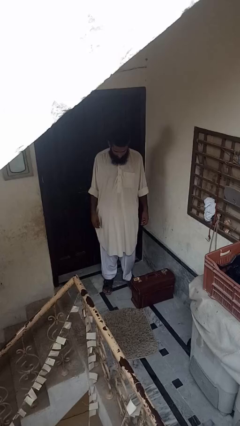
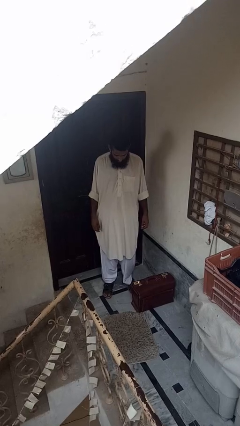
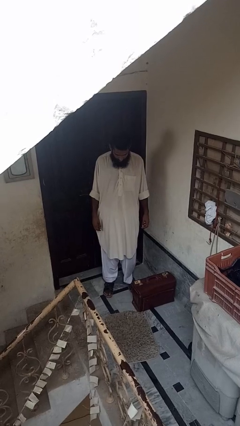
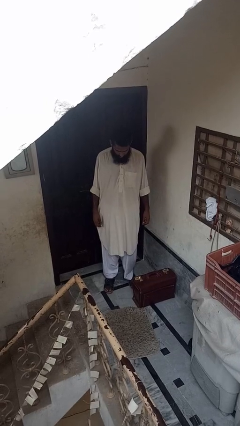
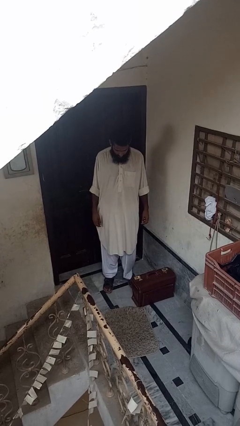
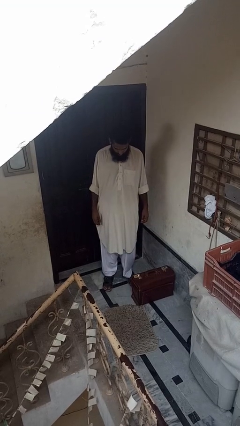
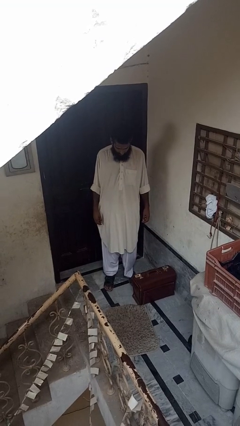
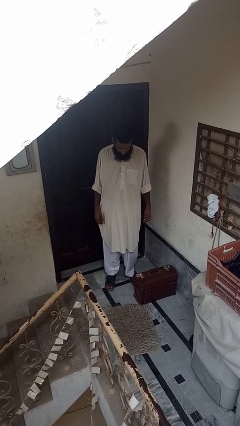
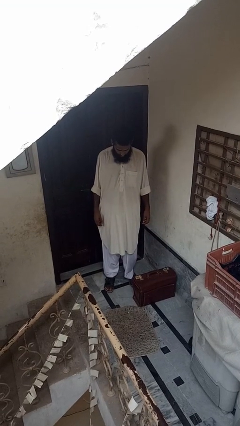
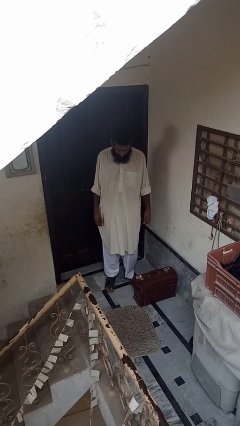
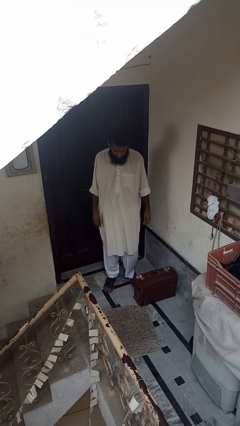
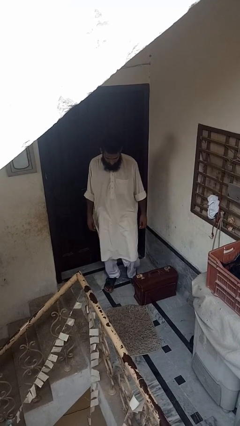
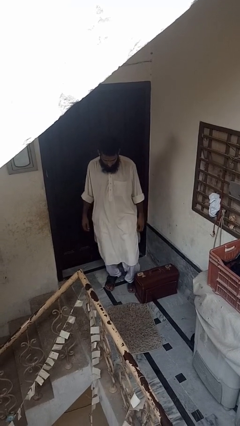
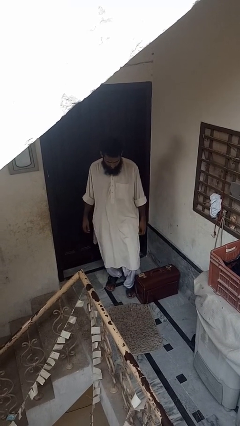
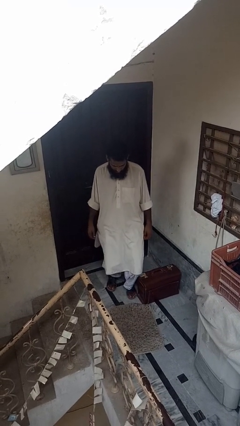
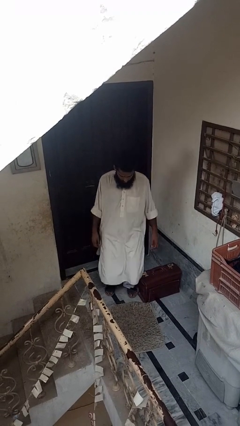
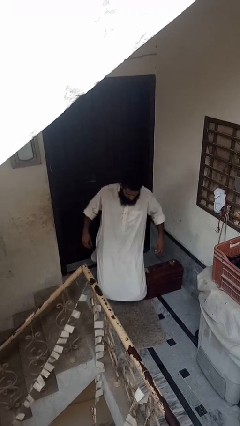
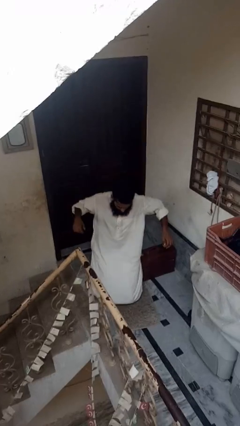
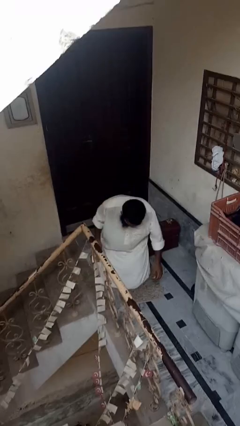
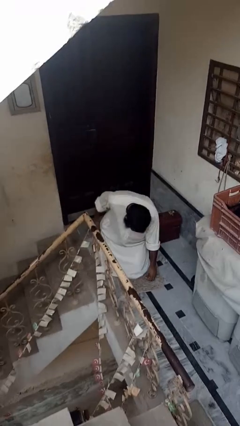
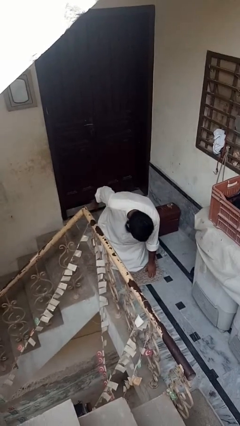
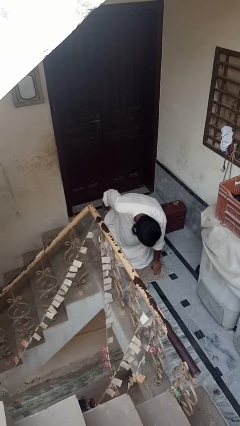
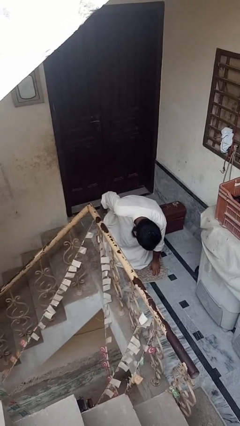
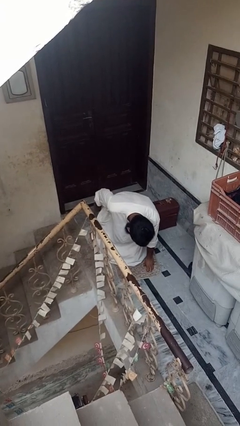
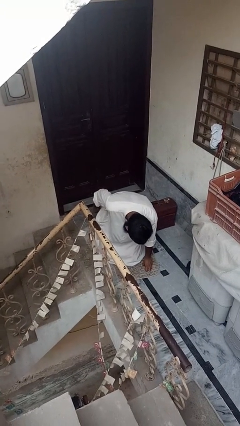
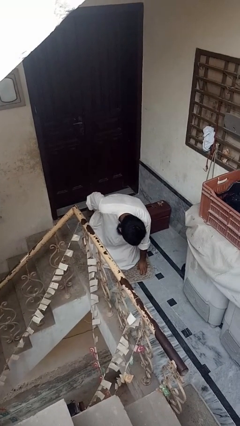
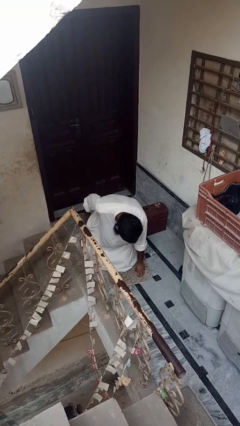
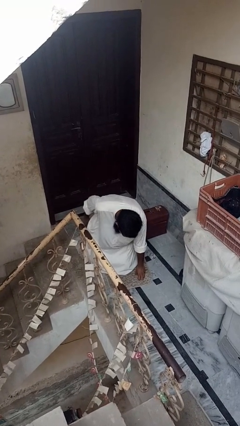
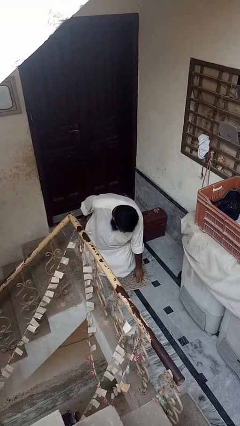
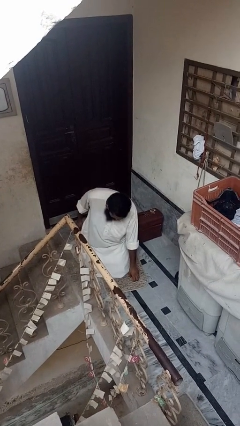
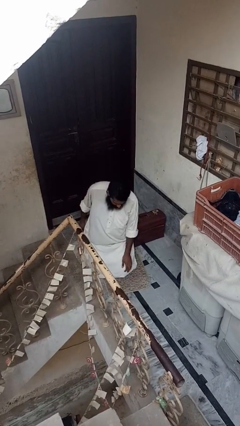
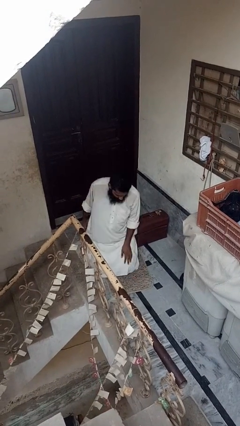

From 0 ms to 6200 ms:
person trips on object on floor

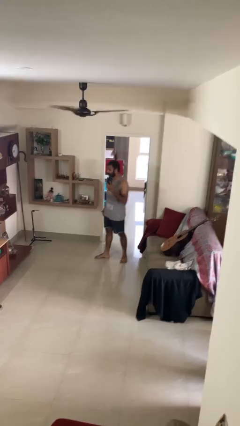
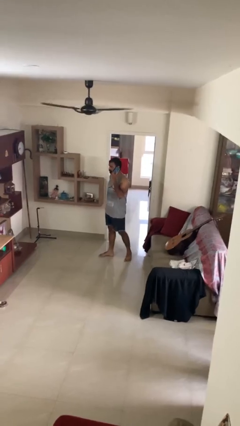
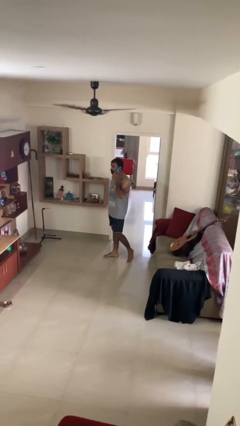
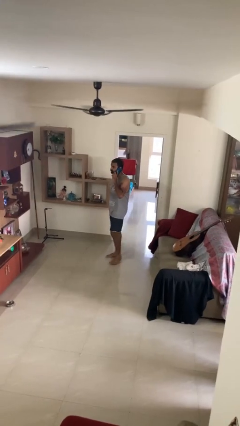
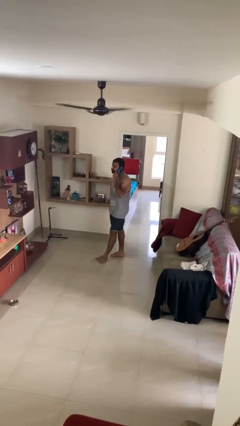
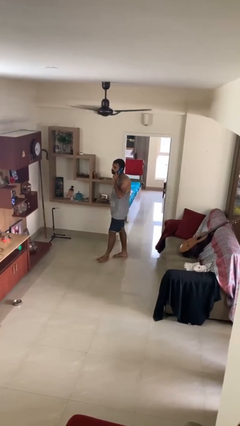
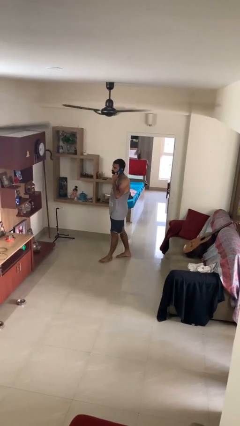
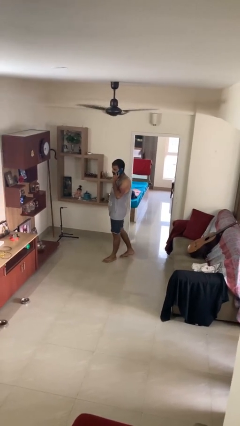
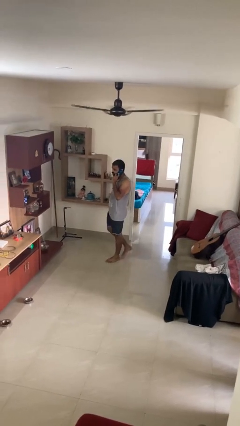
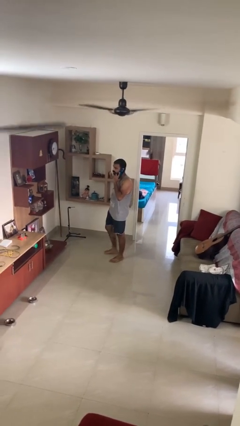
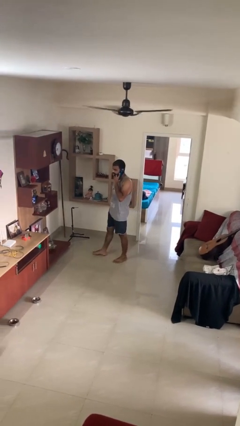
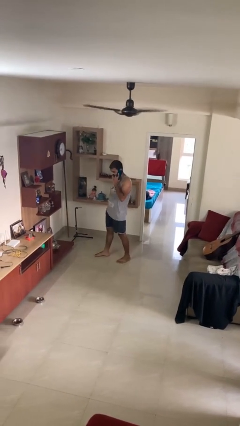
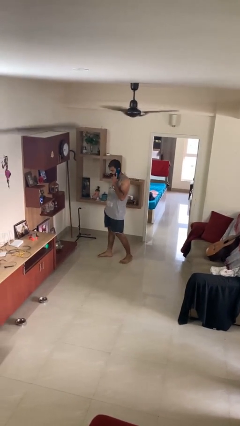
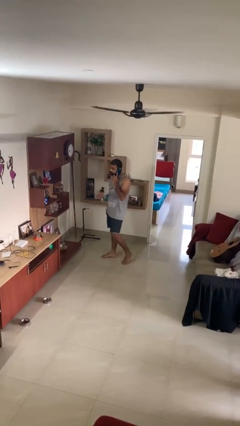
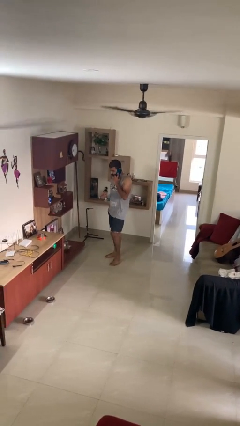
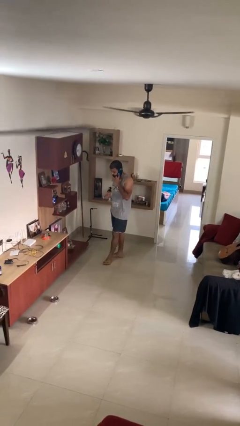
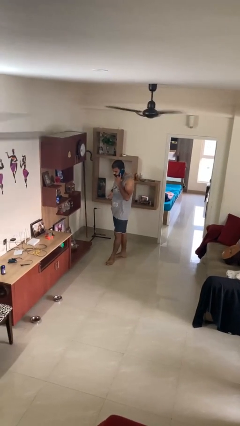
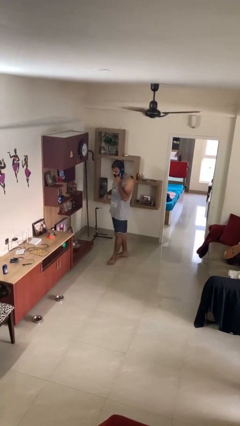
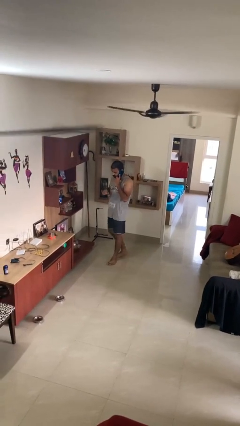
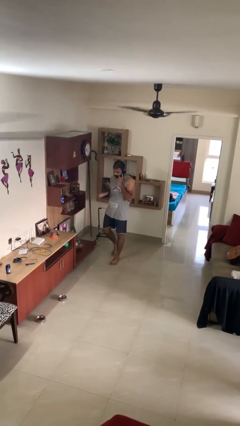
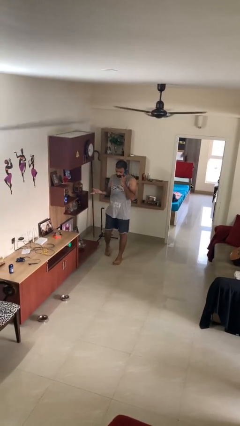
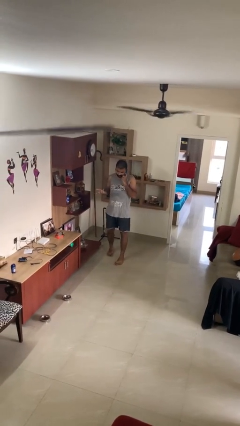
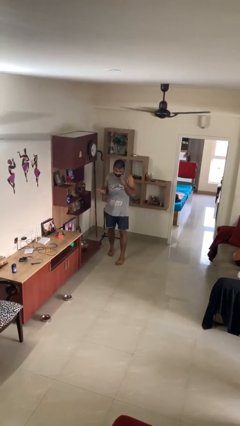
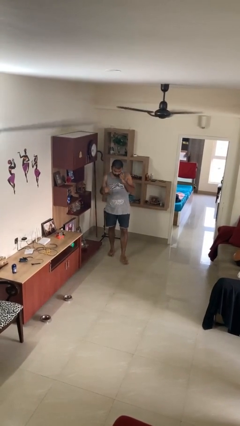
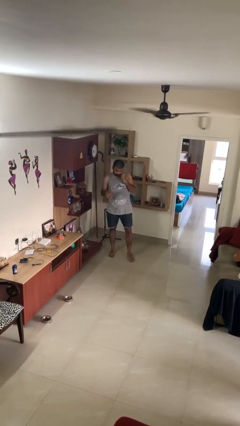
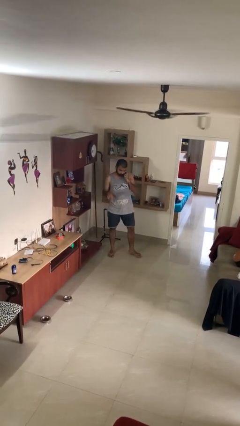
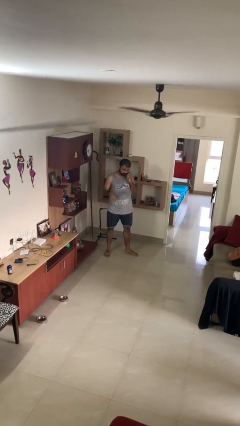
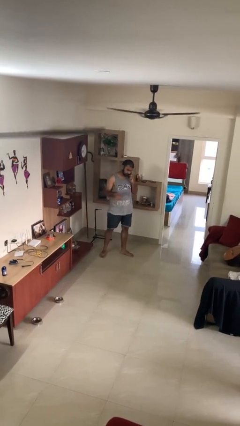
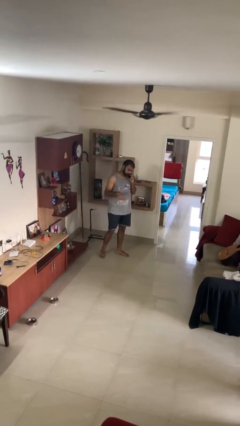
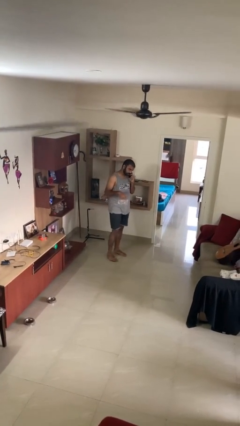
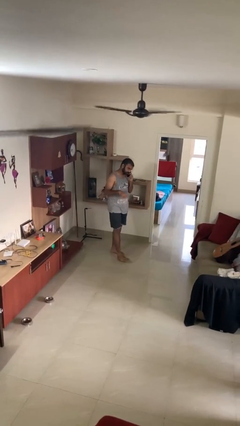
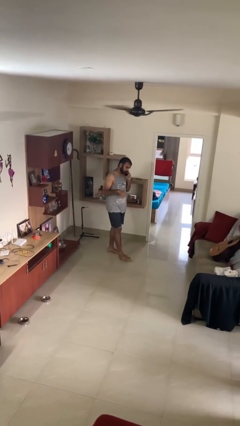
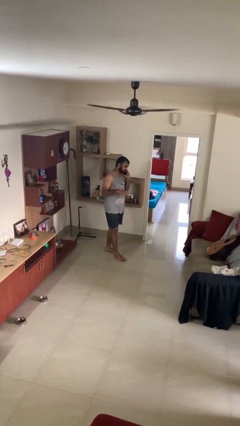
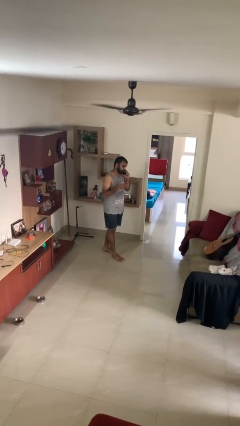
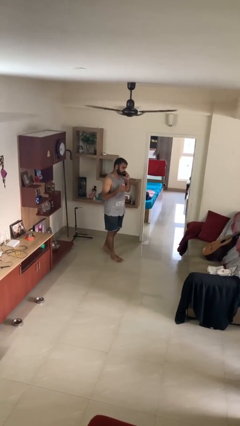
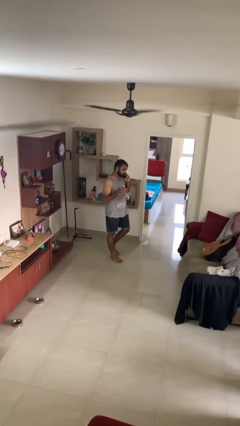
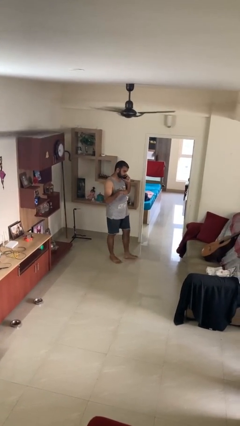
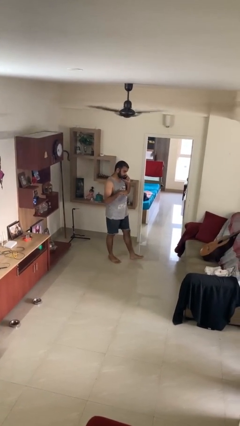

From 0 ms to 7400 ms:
person talks on phone

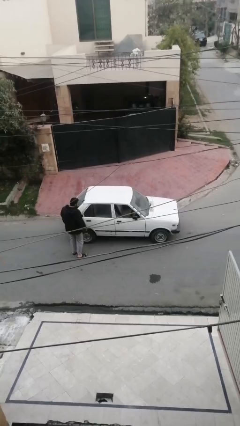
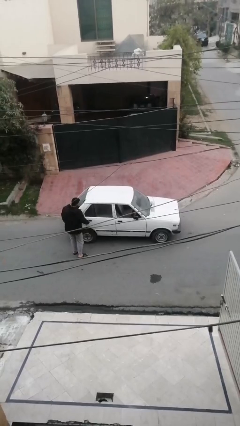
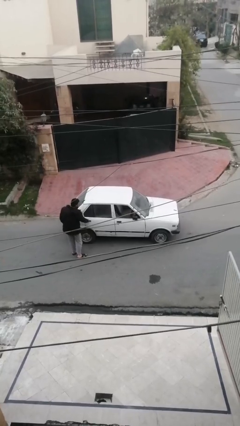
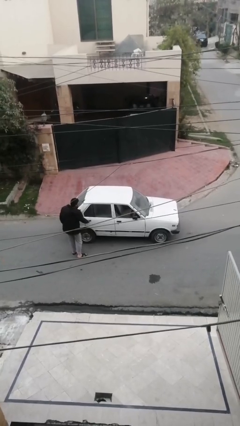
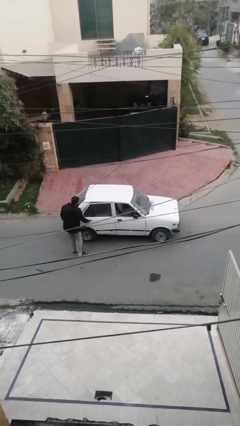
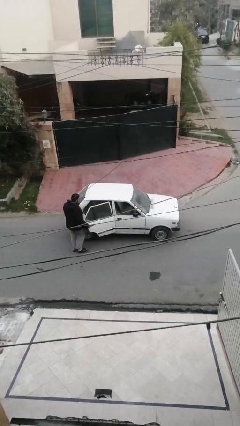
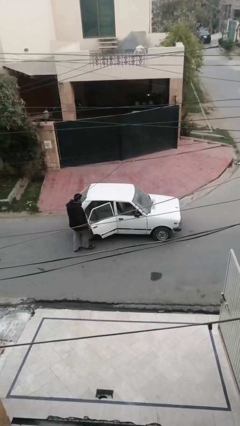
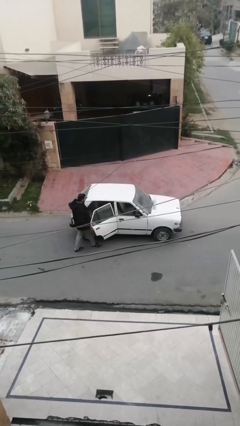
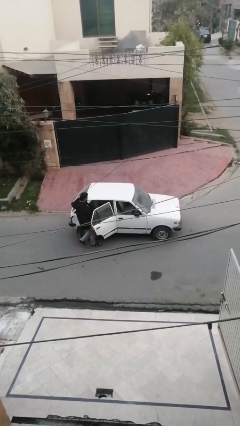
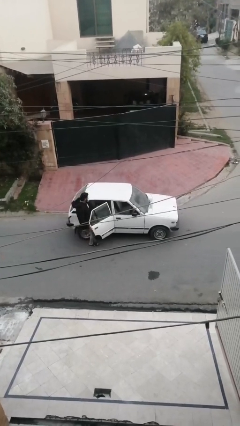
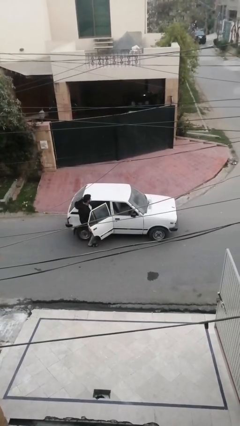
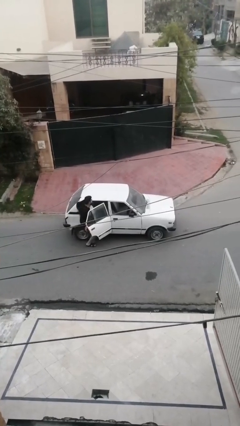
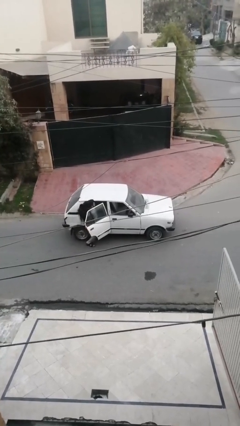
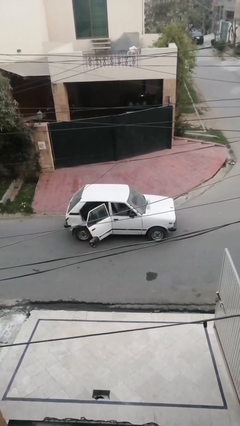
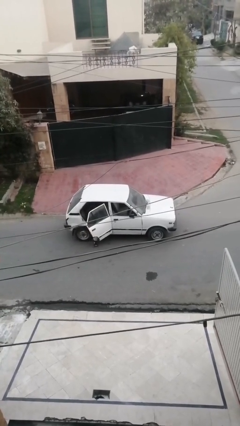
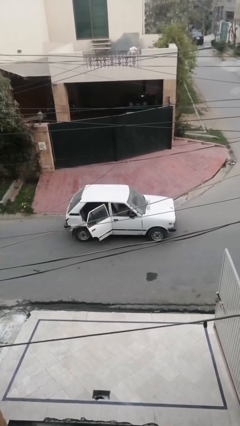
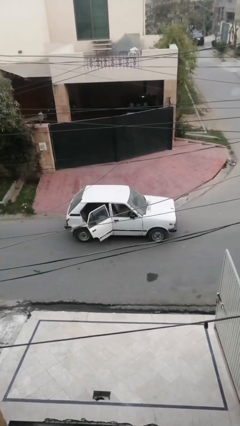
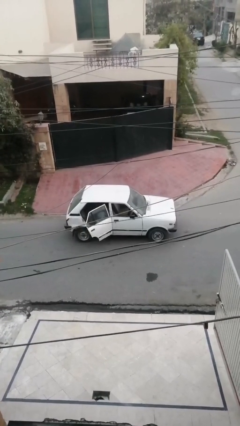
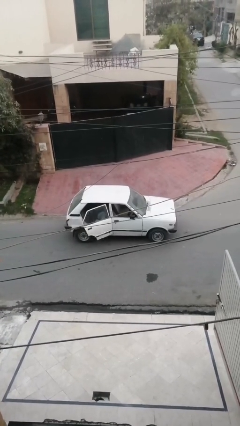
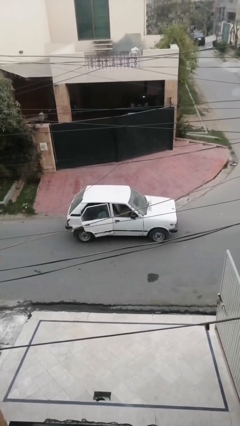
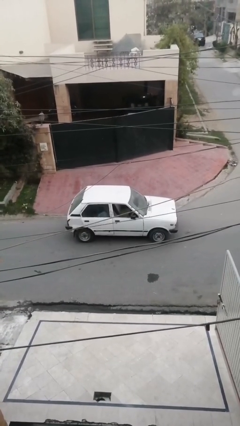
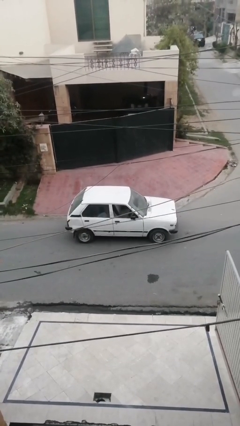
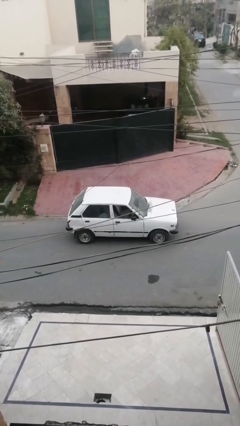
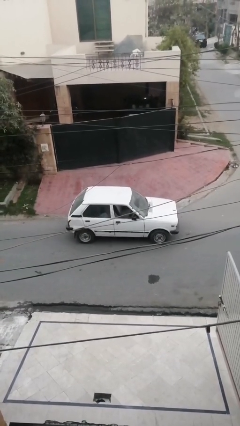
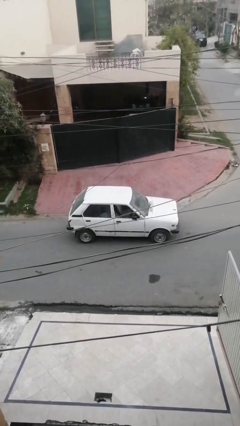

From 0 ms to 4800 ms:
car picks up person
